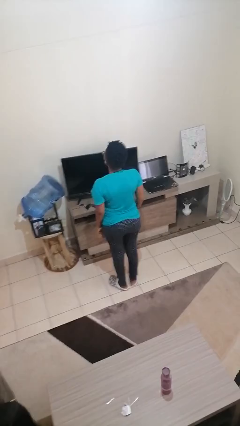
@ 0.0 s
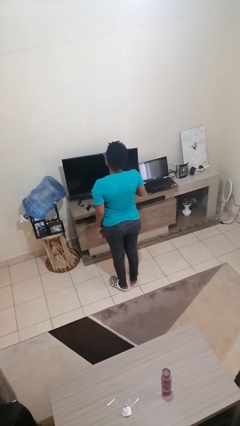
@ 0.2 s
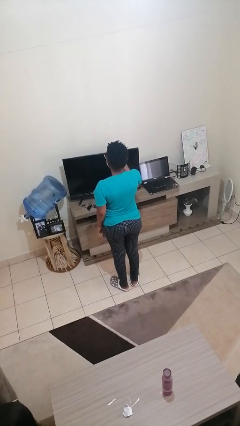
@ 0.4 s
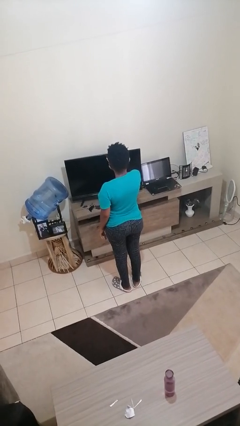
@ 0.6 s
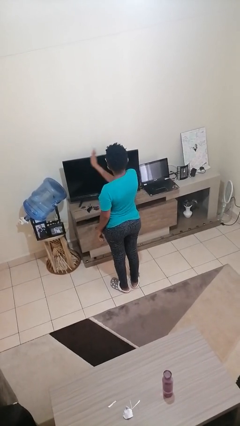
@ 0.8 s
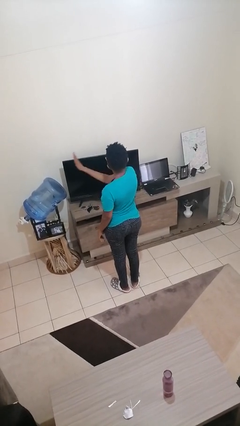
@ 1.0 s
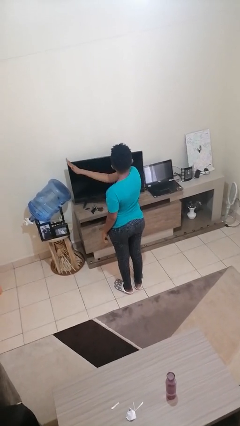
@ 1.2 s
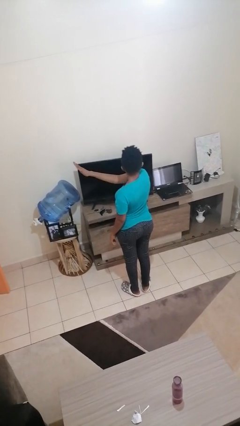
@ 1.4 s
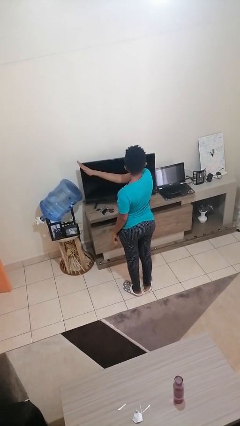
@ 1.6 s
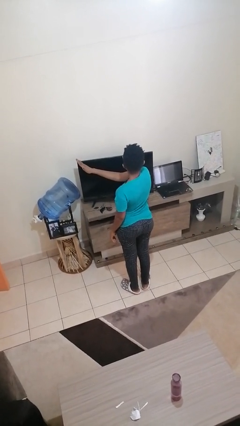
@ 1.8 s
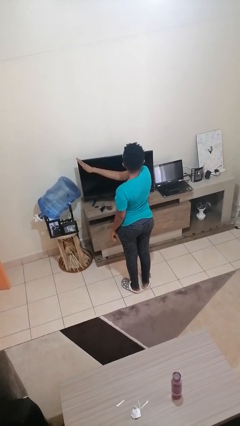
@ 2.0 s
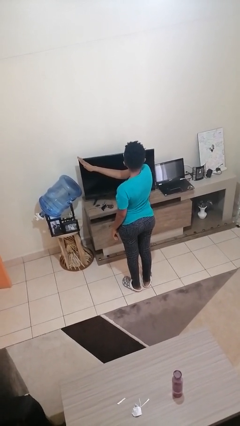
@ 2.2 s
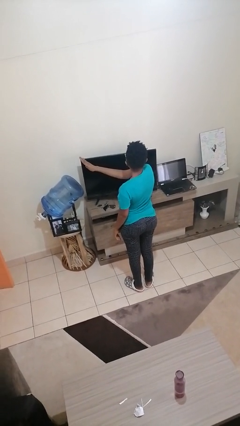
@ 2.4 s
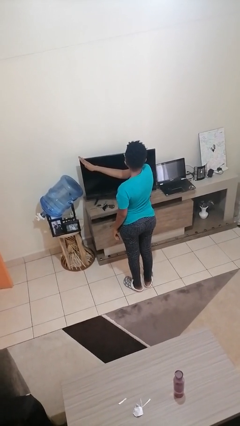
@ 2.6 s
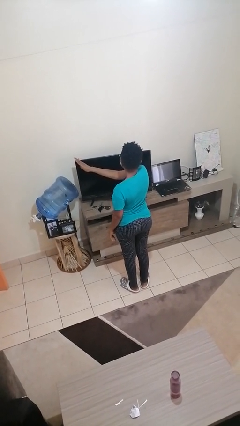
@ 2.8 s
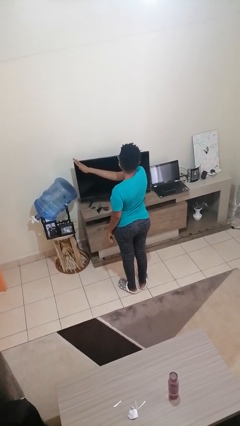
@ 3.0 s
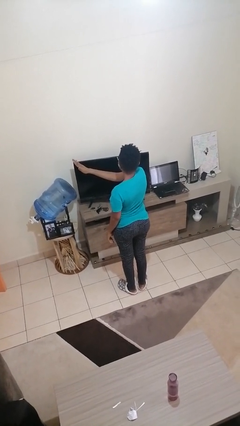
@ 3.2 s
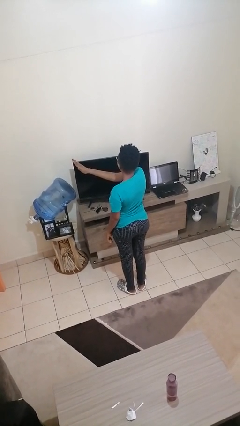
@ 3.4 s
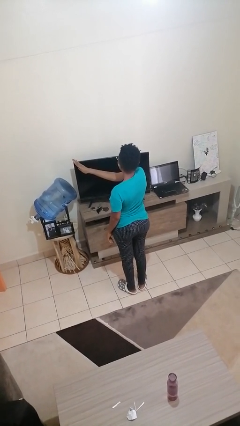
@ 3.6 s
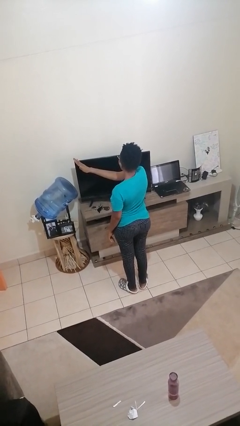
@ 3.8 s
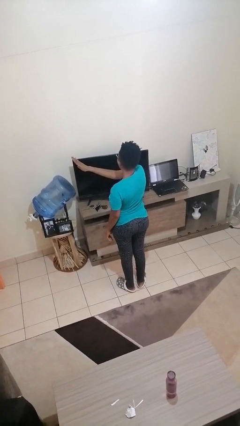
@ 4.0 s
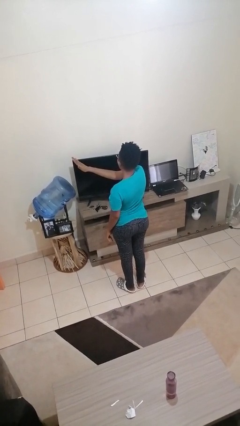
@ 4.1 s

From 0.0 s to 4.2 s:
person gestures swipe left

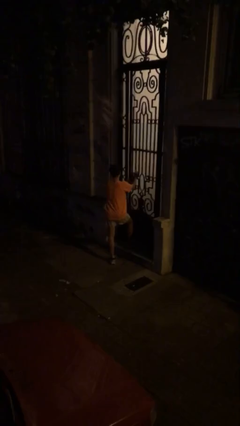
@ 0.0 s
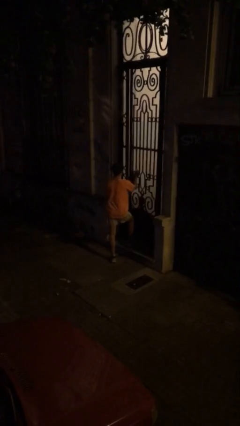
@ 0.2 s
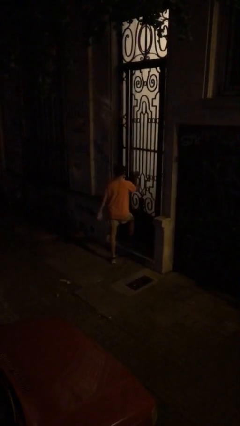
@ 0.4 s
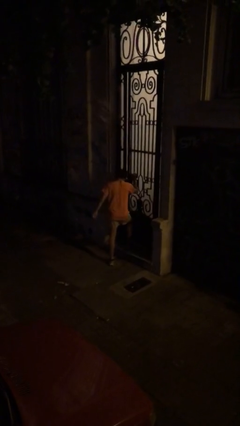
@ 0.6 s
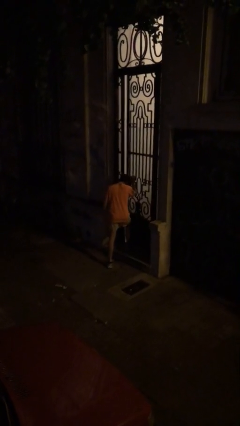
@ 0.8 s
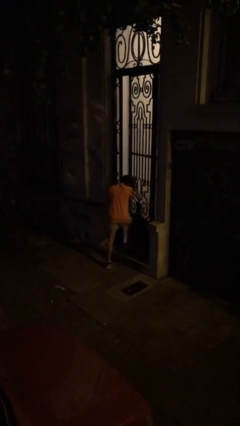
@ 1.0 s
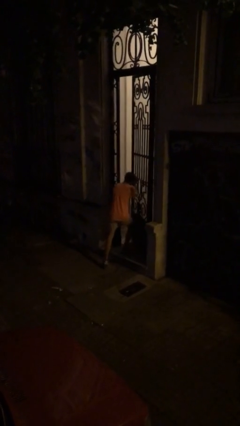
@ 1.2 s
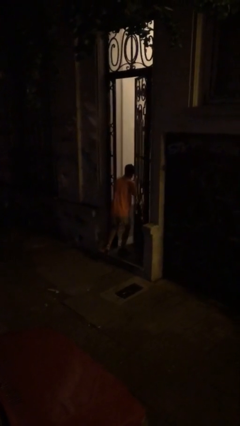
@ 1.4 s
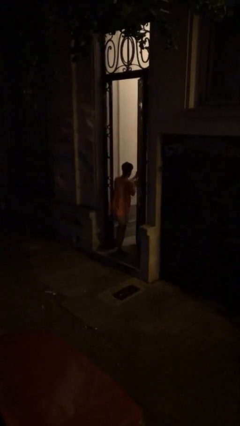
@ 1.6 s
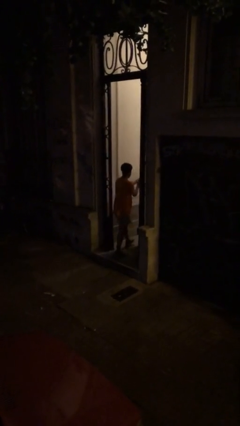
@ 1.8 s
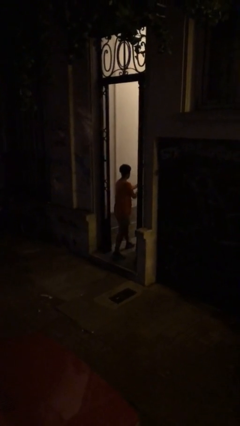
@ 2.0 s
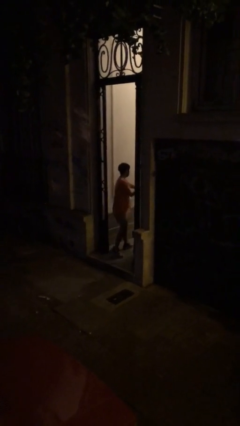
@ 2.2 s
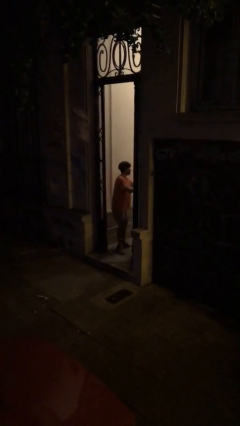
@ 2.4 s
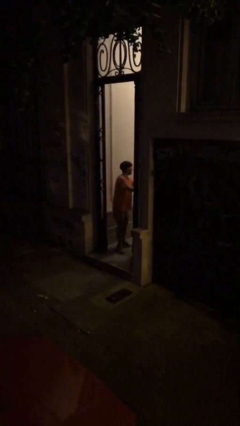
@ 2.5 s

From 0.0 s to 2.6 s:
person opens facility door

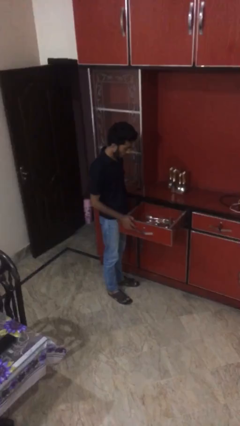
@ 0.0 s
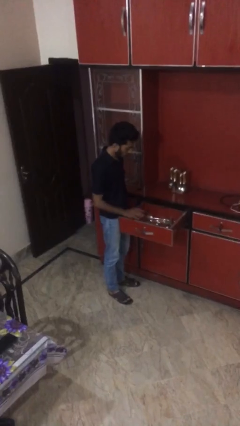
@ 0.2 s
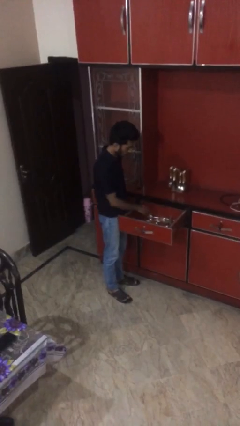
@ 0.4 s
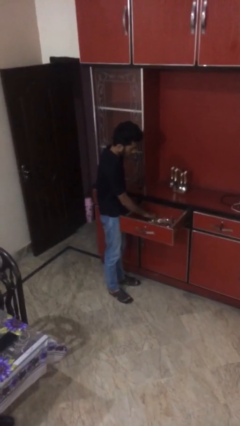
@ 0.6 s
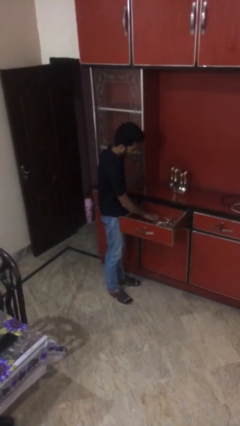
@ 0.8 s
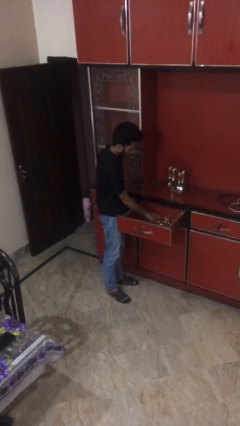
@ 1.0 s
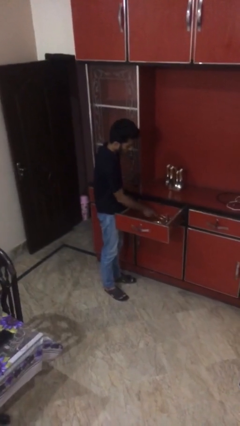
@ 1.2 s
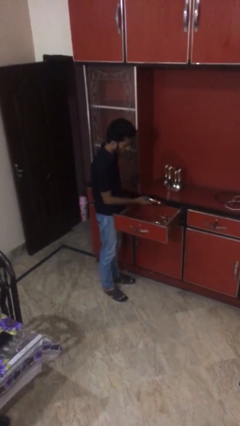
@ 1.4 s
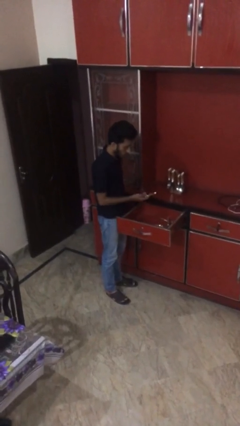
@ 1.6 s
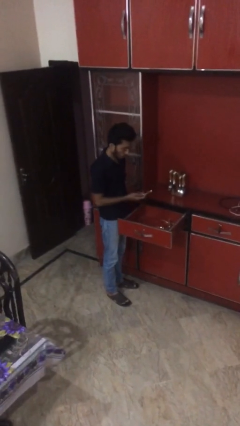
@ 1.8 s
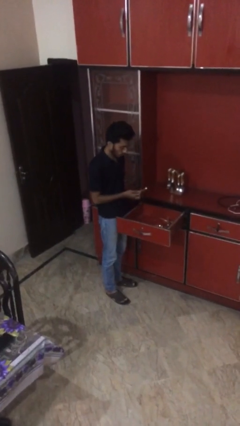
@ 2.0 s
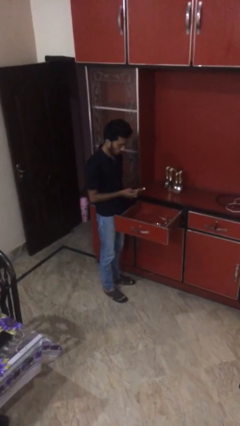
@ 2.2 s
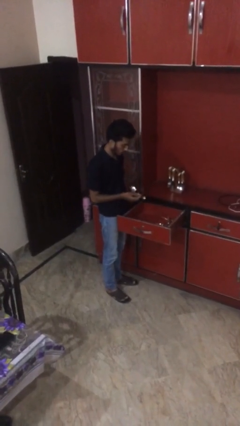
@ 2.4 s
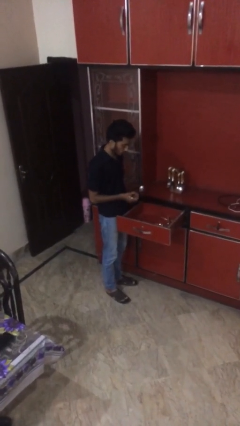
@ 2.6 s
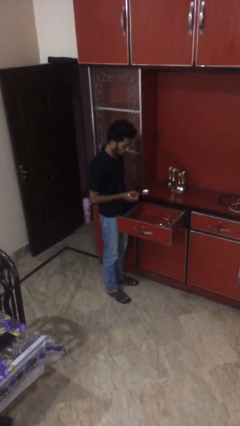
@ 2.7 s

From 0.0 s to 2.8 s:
person takes object from kitchen drawer

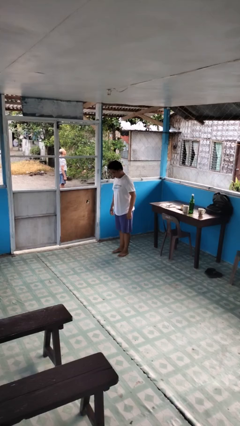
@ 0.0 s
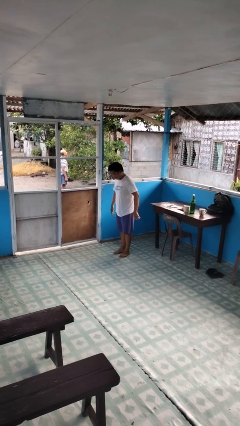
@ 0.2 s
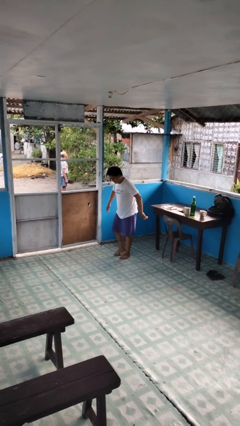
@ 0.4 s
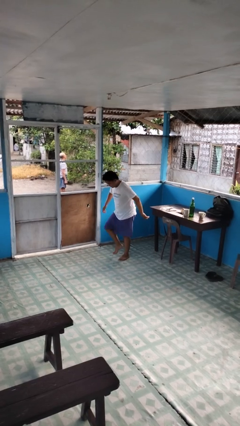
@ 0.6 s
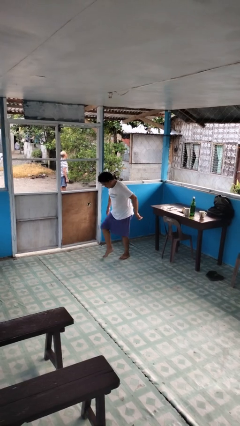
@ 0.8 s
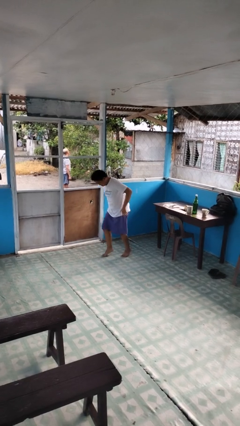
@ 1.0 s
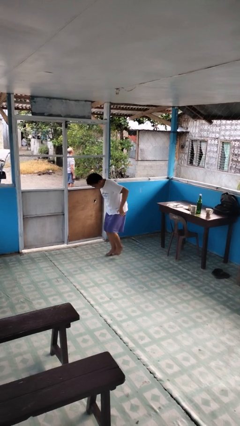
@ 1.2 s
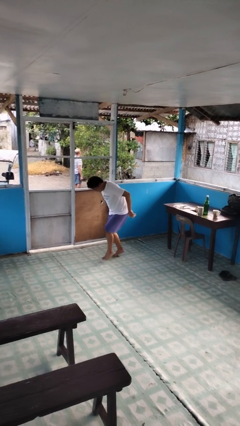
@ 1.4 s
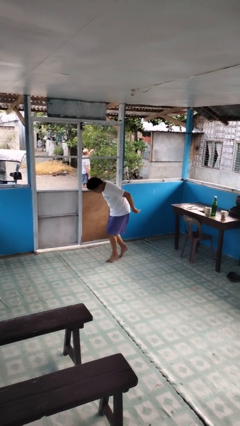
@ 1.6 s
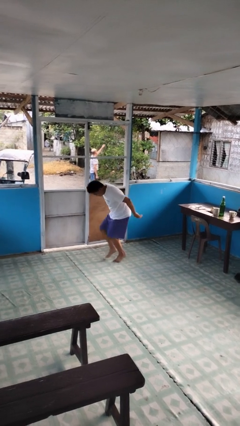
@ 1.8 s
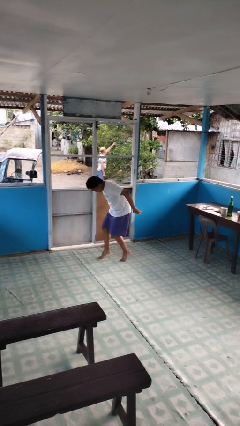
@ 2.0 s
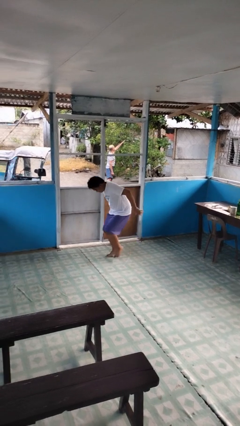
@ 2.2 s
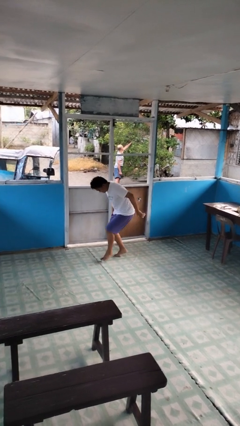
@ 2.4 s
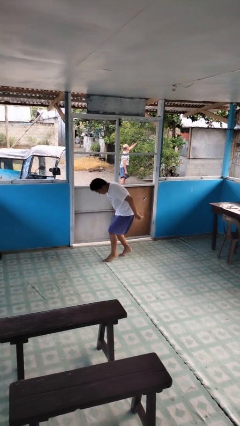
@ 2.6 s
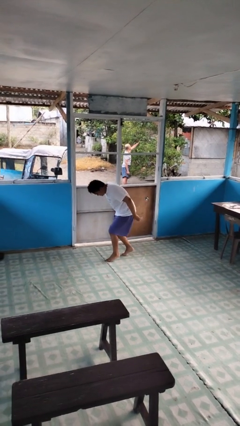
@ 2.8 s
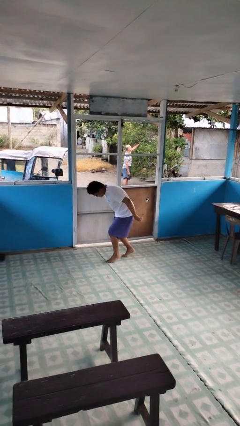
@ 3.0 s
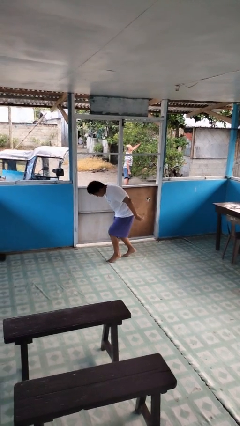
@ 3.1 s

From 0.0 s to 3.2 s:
person walks tiptoe

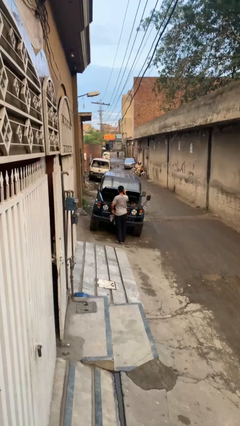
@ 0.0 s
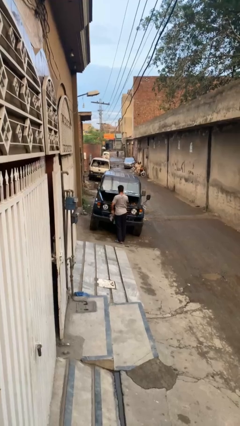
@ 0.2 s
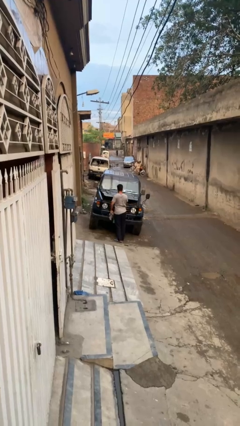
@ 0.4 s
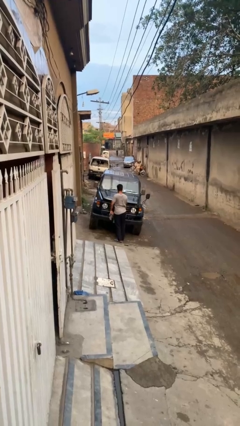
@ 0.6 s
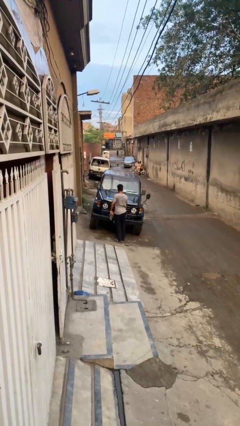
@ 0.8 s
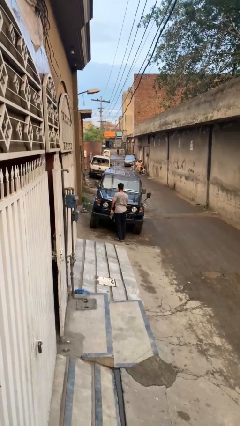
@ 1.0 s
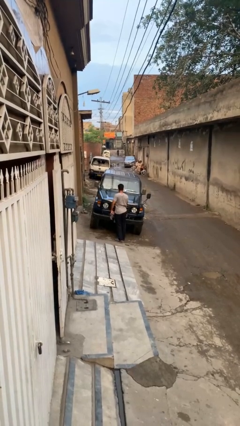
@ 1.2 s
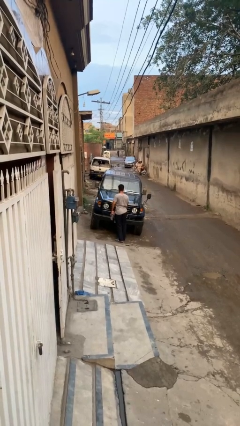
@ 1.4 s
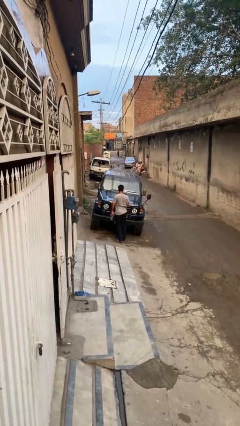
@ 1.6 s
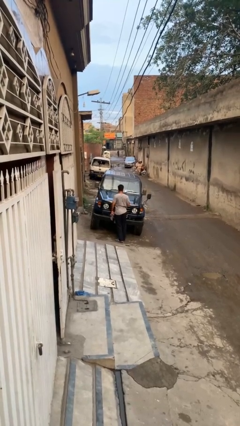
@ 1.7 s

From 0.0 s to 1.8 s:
person closes car hood

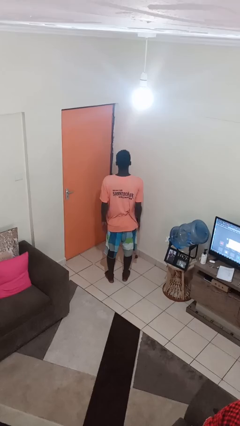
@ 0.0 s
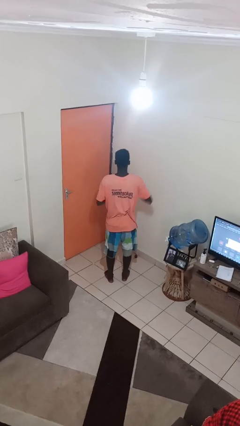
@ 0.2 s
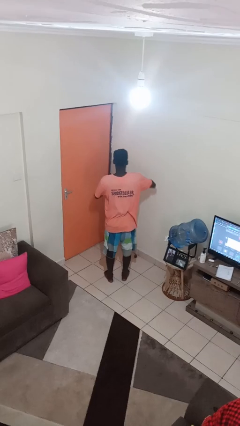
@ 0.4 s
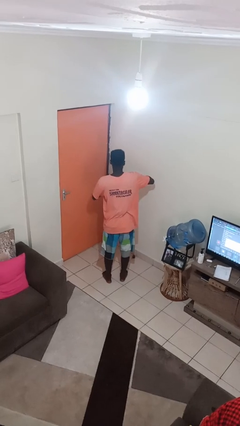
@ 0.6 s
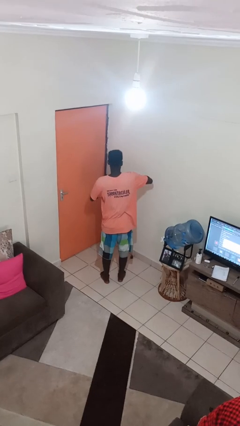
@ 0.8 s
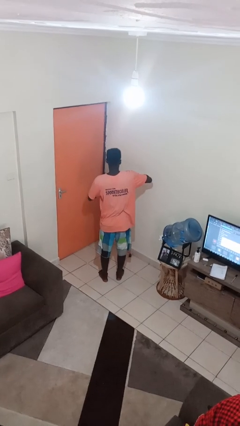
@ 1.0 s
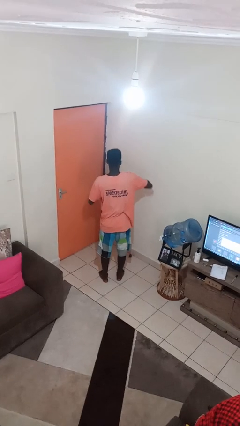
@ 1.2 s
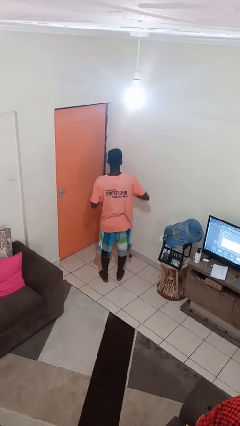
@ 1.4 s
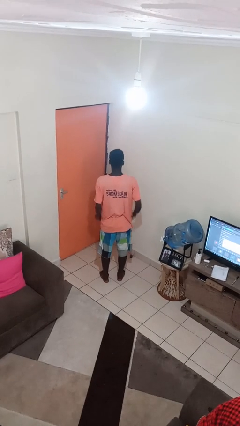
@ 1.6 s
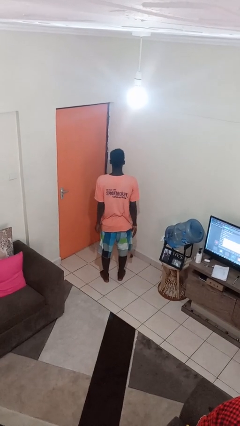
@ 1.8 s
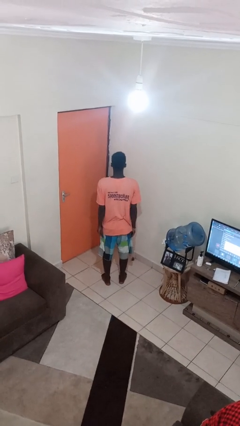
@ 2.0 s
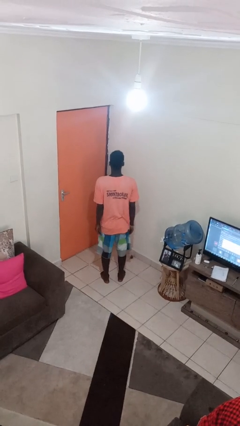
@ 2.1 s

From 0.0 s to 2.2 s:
person takes off ring

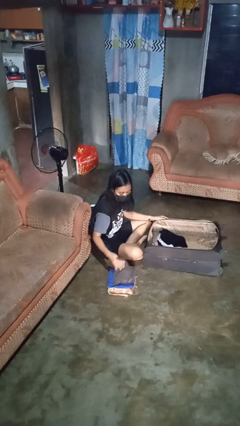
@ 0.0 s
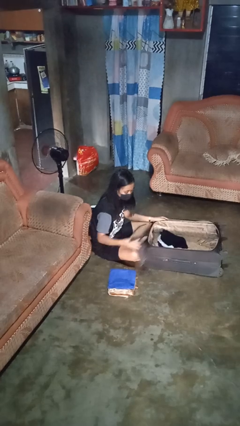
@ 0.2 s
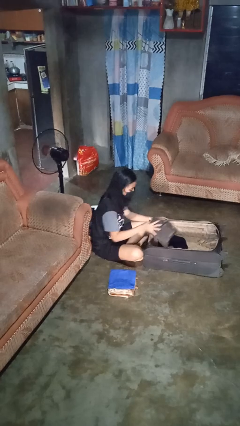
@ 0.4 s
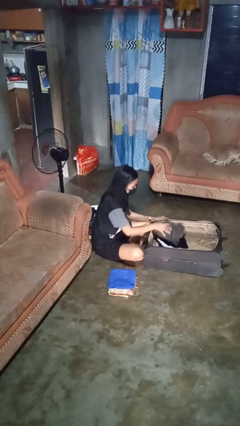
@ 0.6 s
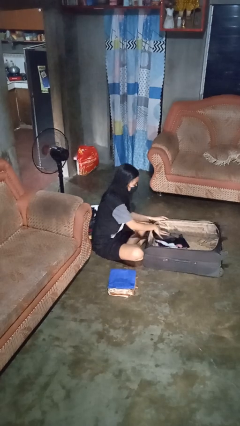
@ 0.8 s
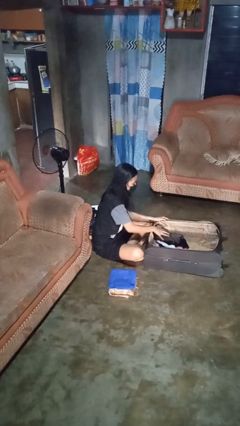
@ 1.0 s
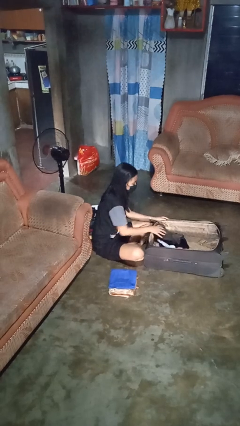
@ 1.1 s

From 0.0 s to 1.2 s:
person loads clothes into suitcase
